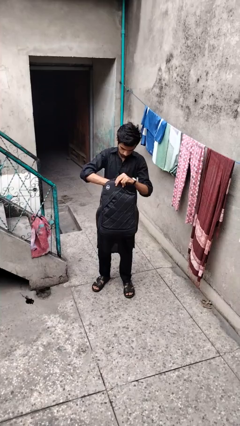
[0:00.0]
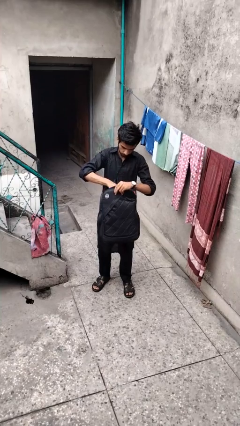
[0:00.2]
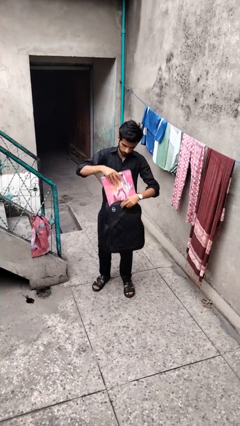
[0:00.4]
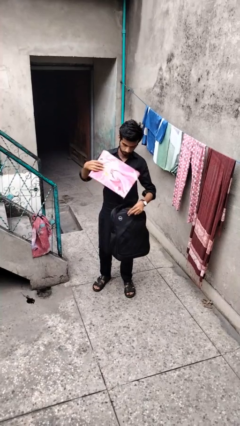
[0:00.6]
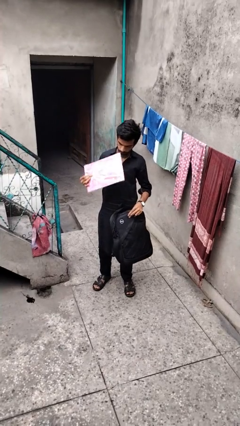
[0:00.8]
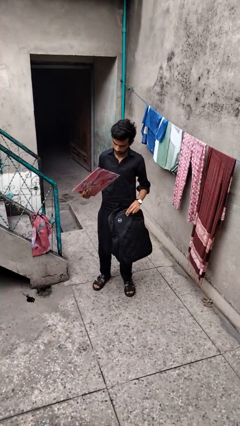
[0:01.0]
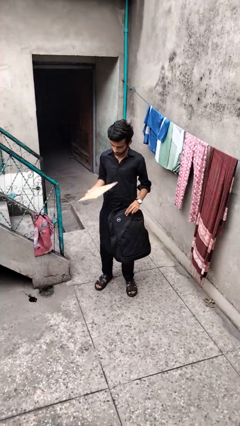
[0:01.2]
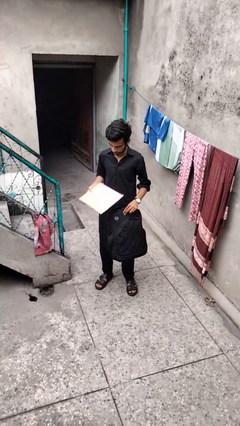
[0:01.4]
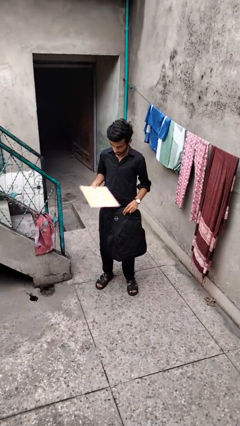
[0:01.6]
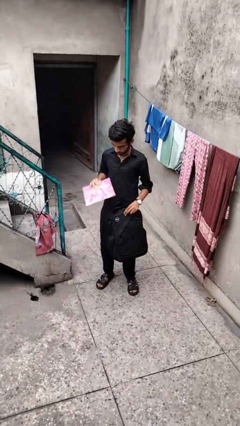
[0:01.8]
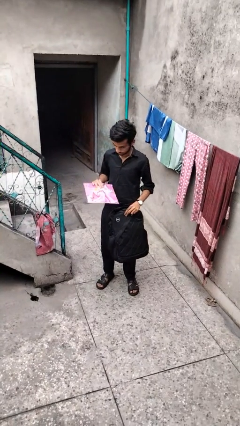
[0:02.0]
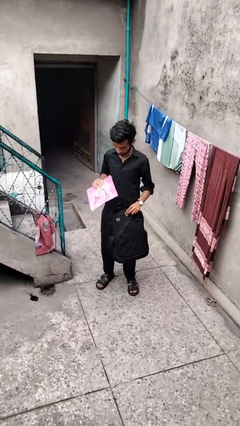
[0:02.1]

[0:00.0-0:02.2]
person takes object from backpack

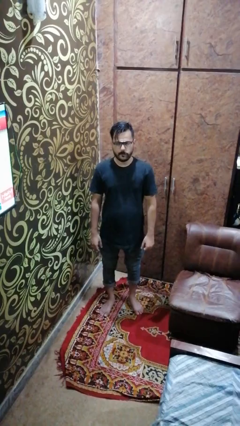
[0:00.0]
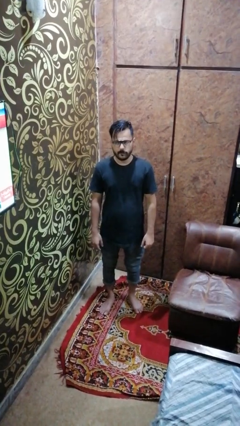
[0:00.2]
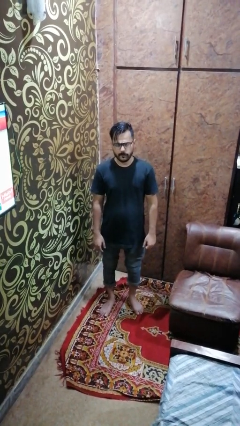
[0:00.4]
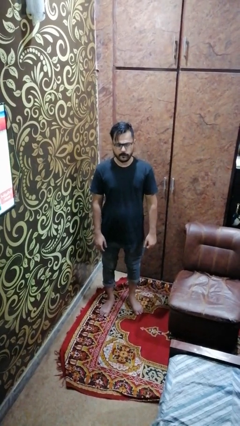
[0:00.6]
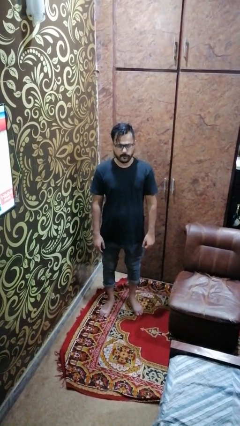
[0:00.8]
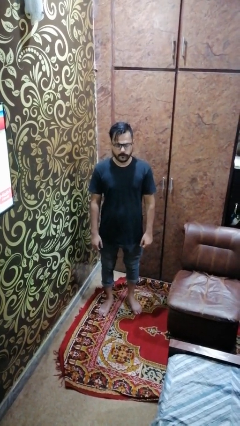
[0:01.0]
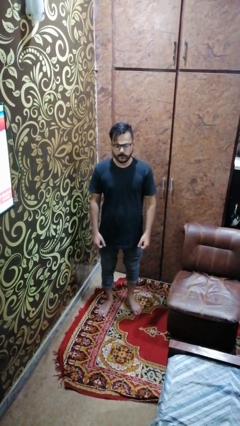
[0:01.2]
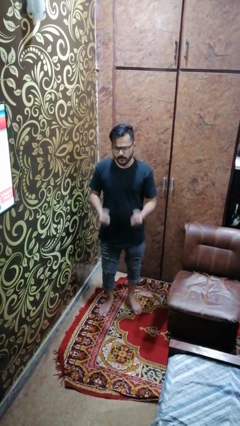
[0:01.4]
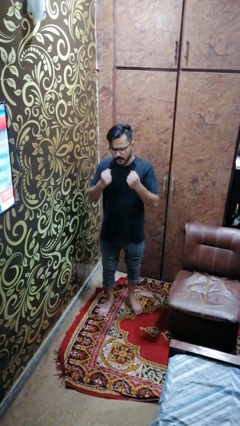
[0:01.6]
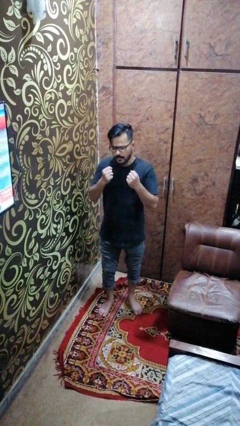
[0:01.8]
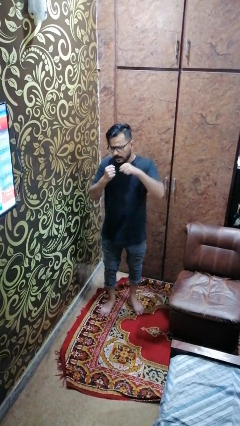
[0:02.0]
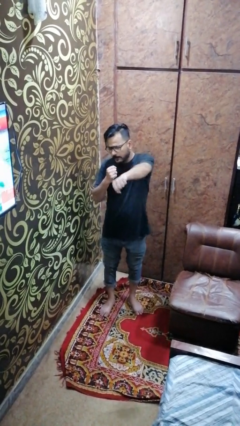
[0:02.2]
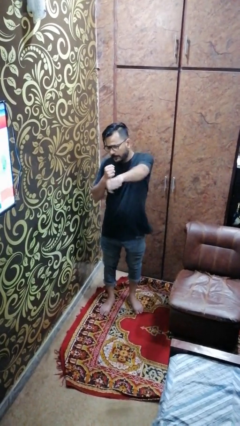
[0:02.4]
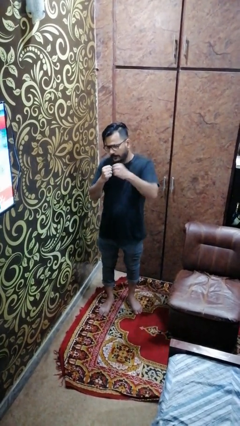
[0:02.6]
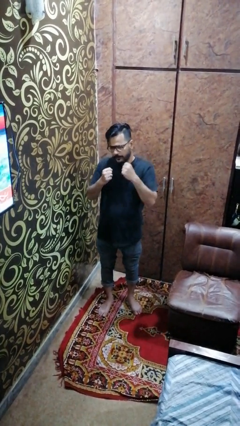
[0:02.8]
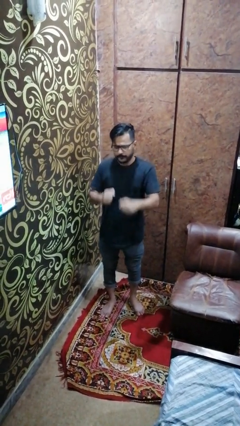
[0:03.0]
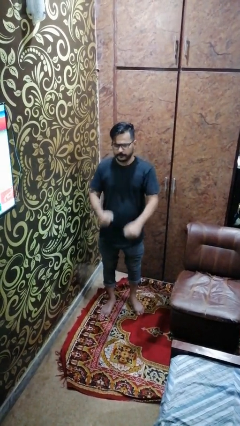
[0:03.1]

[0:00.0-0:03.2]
person punches

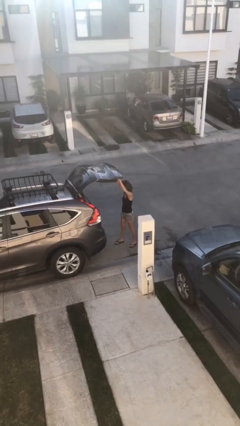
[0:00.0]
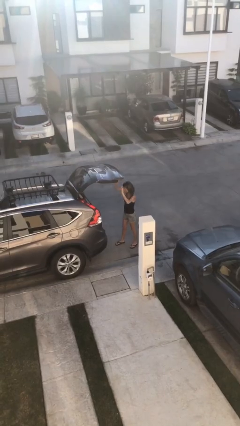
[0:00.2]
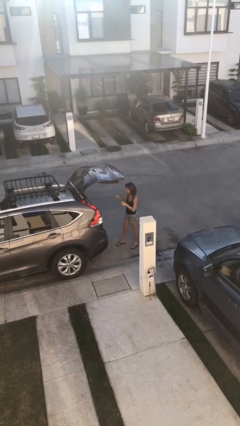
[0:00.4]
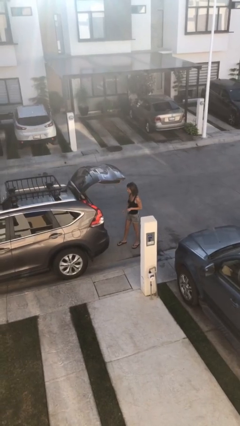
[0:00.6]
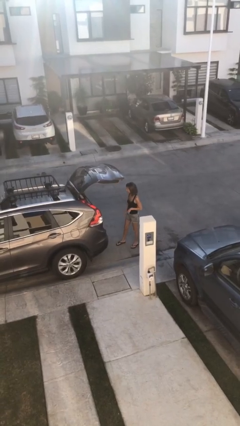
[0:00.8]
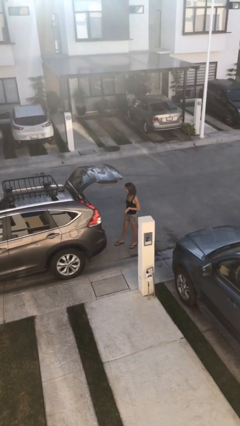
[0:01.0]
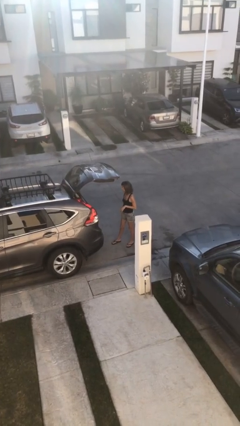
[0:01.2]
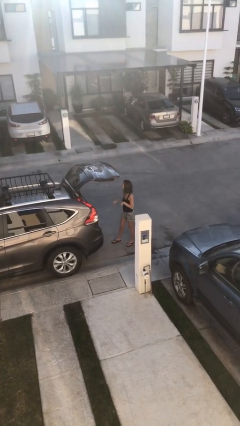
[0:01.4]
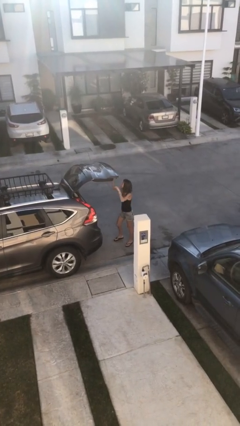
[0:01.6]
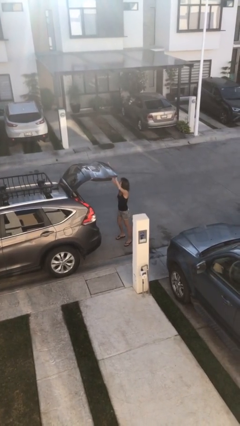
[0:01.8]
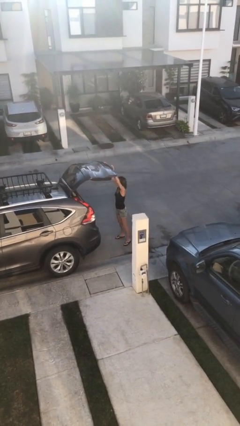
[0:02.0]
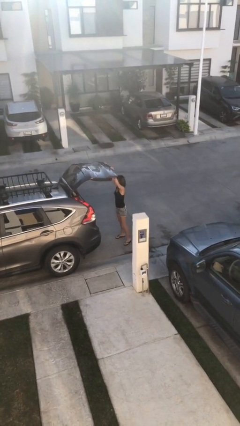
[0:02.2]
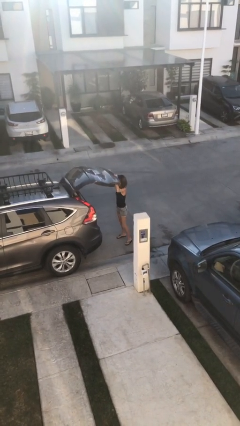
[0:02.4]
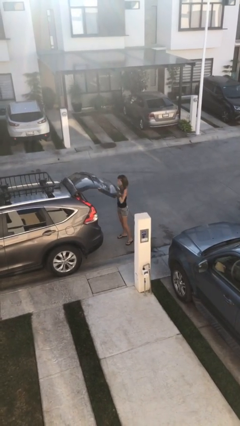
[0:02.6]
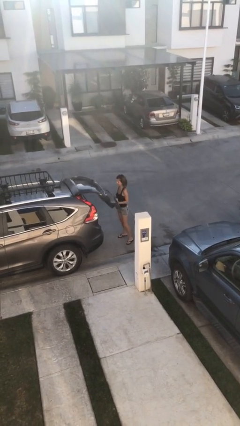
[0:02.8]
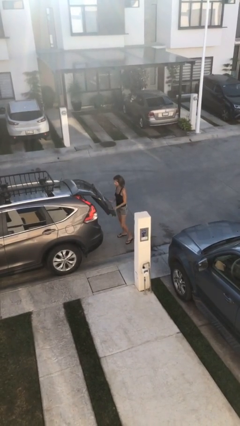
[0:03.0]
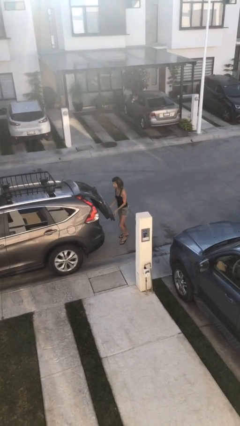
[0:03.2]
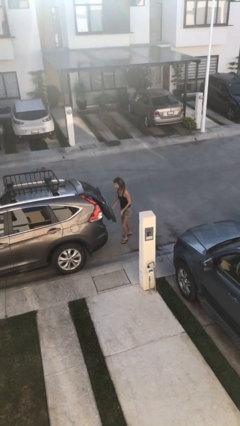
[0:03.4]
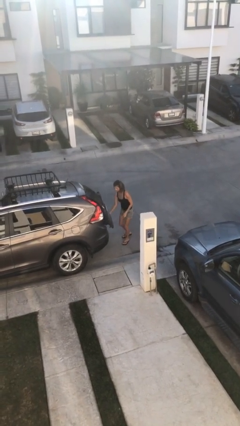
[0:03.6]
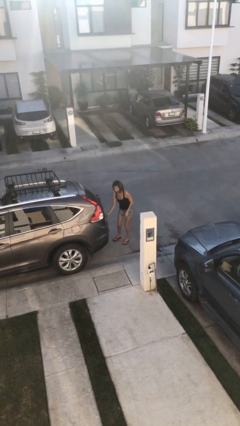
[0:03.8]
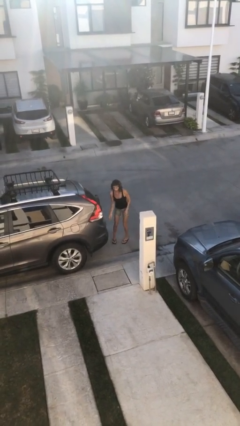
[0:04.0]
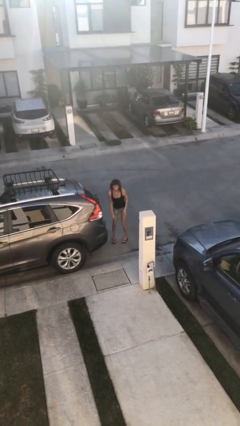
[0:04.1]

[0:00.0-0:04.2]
person closes car trunk

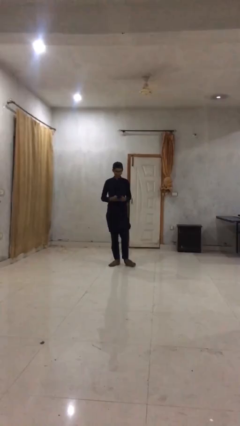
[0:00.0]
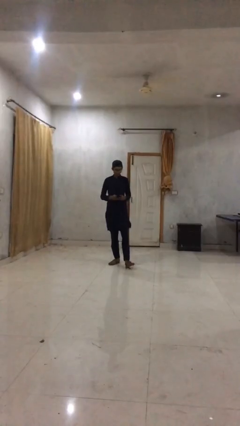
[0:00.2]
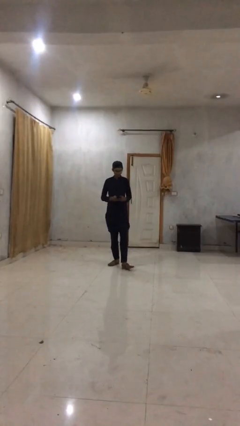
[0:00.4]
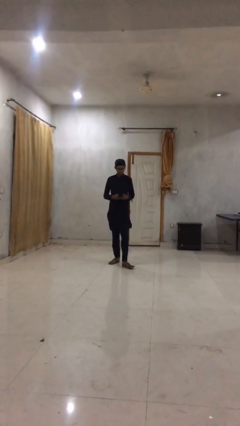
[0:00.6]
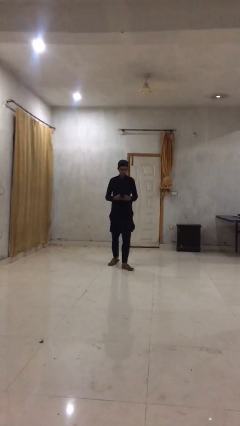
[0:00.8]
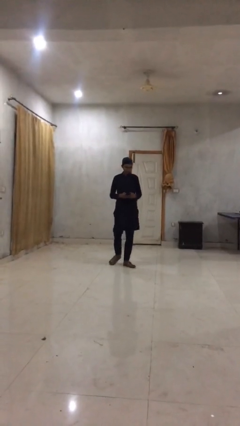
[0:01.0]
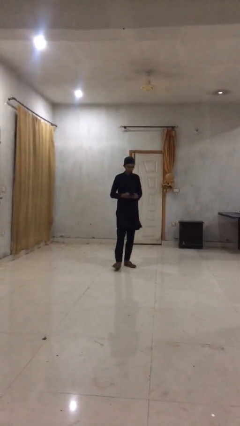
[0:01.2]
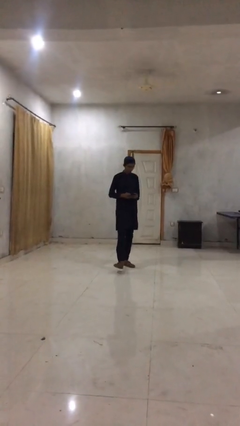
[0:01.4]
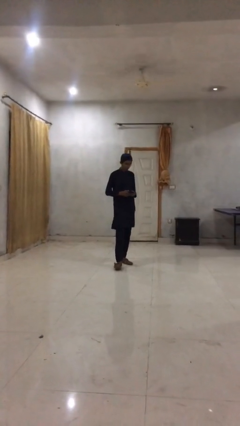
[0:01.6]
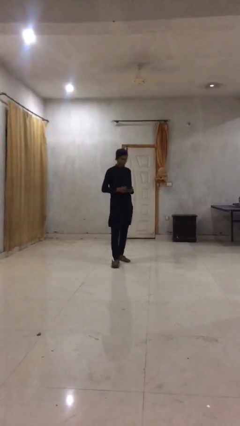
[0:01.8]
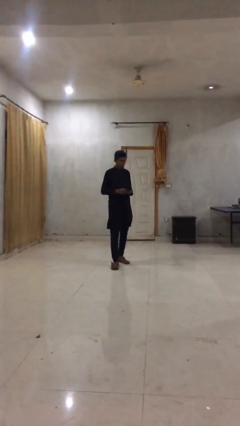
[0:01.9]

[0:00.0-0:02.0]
person texts on phone

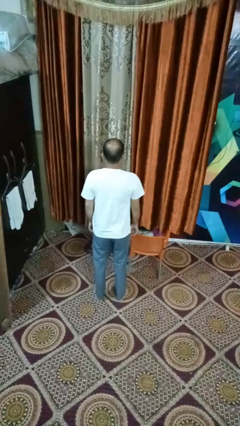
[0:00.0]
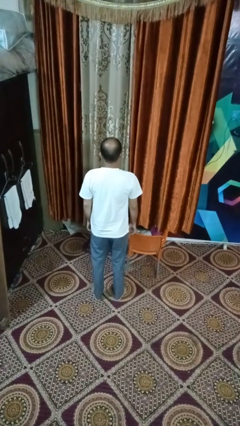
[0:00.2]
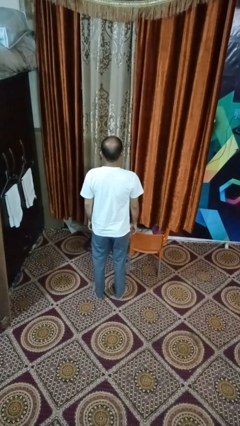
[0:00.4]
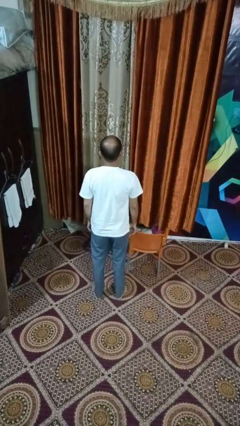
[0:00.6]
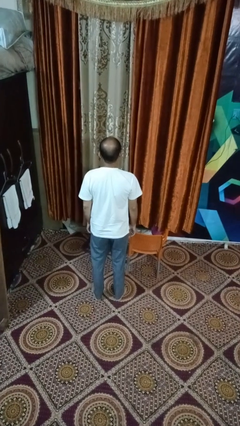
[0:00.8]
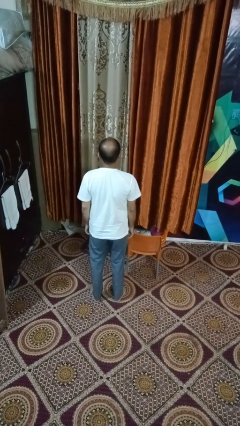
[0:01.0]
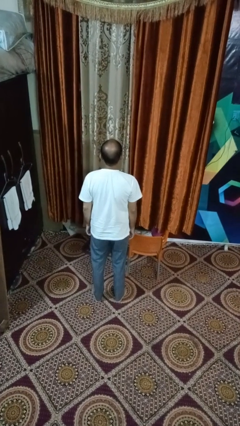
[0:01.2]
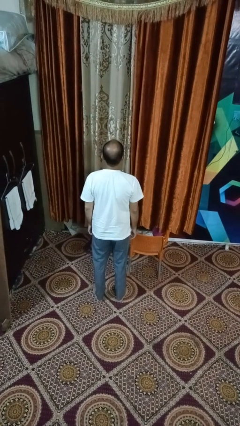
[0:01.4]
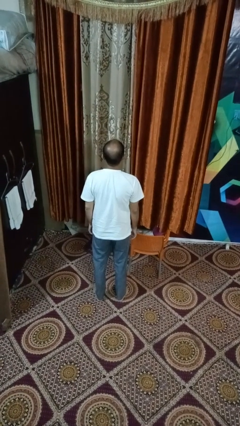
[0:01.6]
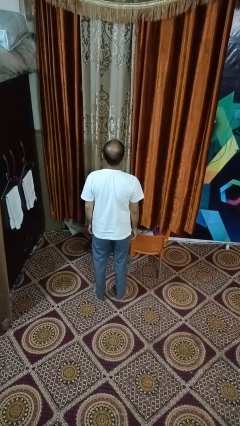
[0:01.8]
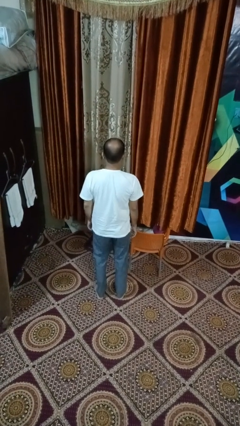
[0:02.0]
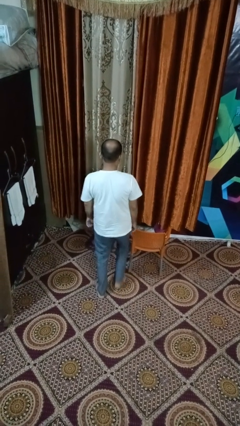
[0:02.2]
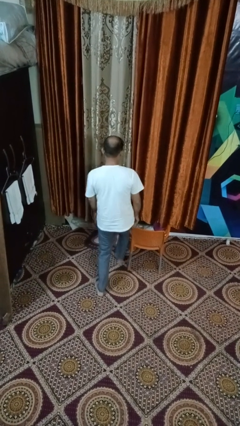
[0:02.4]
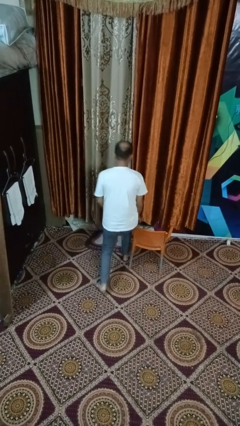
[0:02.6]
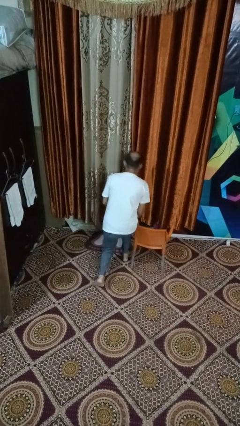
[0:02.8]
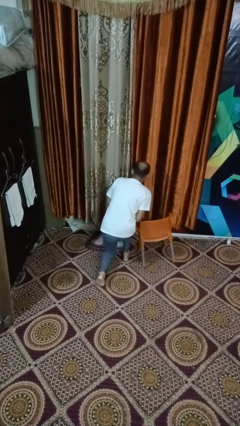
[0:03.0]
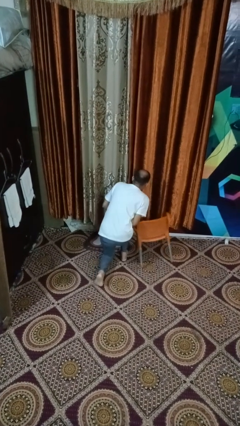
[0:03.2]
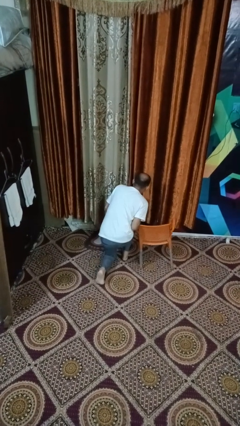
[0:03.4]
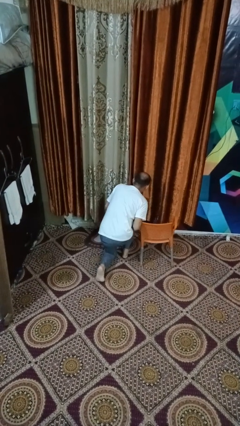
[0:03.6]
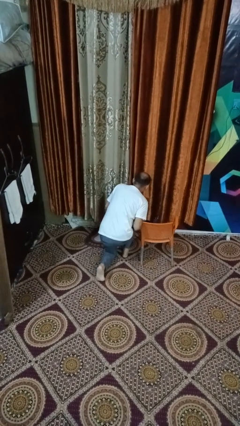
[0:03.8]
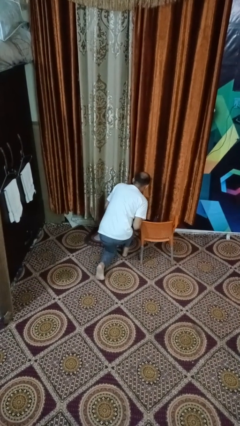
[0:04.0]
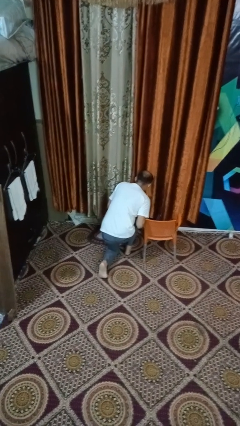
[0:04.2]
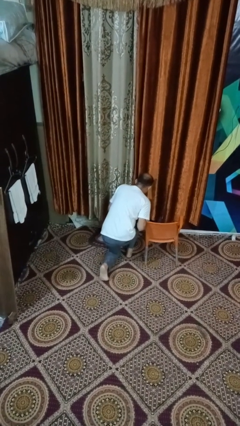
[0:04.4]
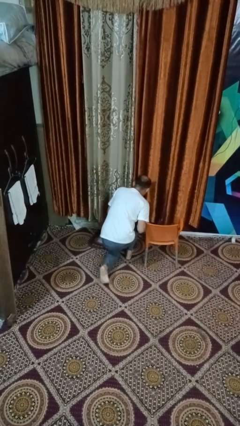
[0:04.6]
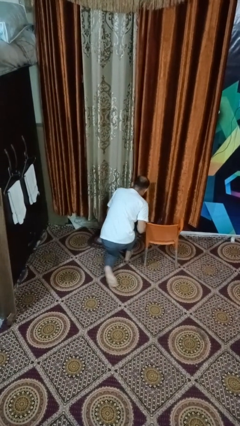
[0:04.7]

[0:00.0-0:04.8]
person trips on object on floor

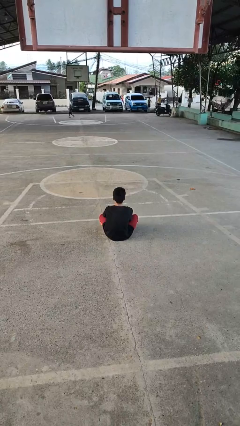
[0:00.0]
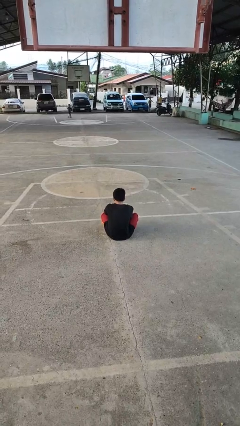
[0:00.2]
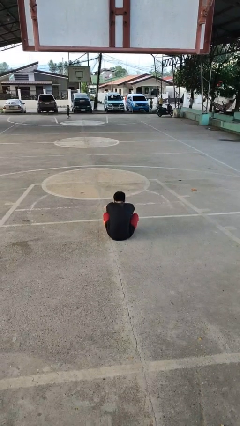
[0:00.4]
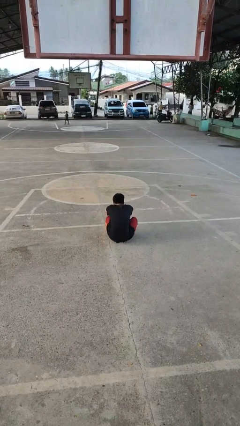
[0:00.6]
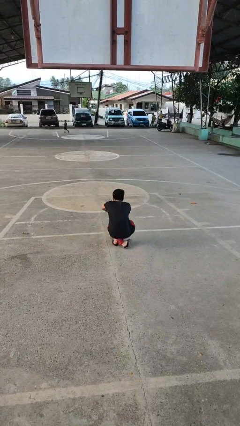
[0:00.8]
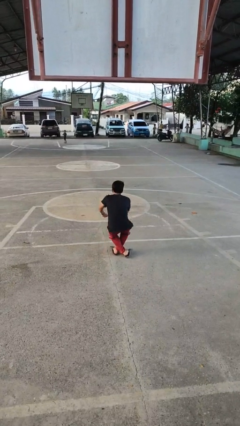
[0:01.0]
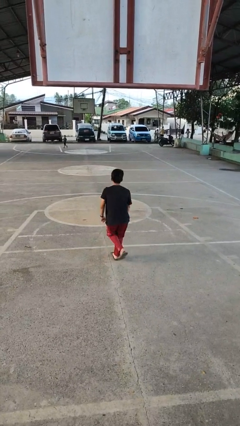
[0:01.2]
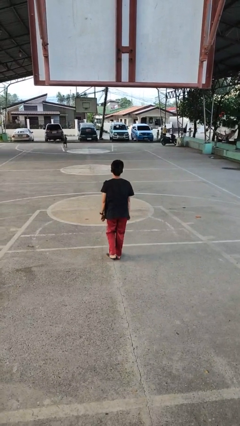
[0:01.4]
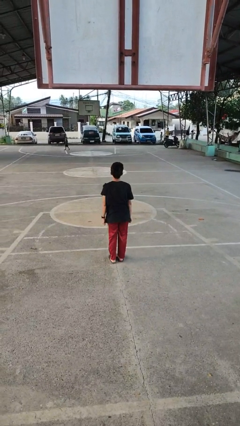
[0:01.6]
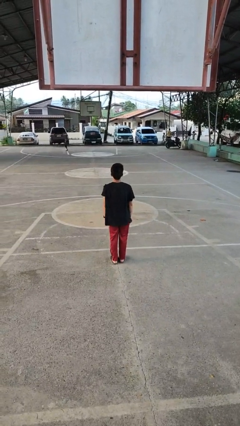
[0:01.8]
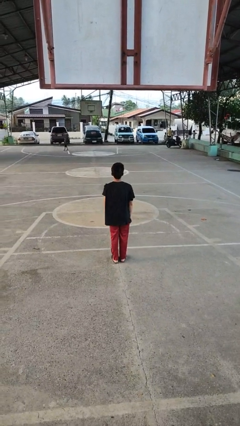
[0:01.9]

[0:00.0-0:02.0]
person stands up from floor
